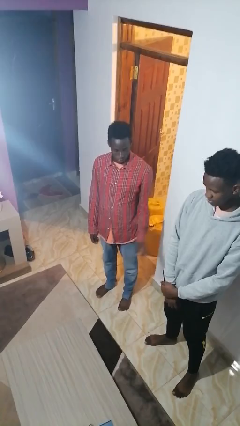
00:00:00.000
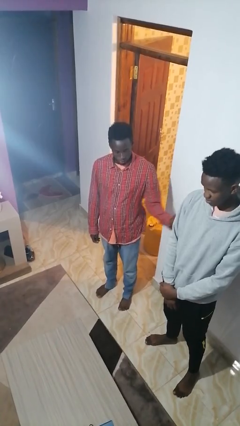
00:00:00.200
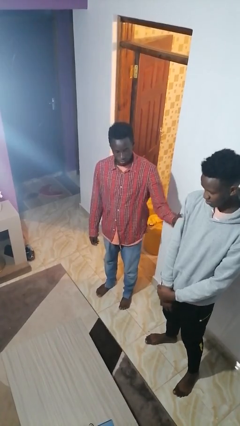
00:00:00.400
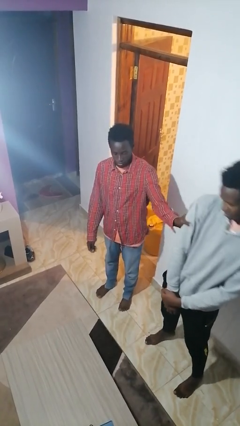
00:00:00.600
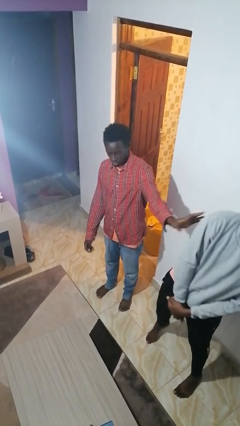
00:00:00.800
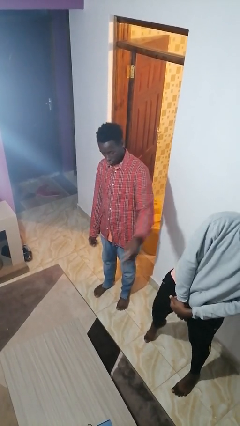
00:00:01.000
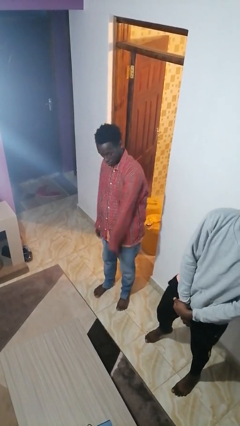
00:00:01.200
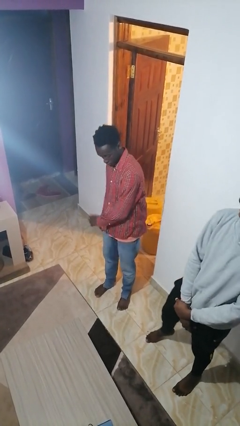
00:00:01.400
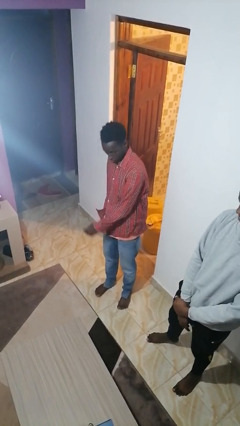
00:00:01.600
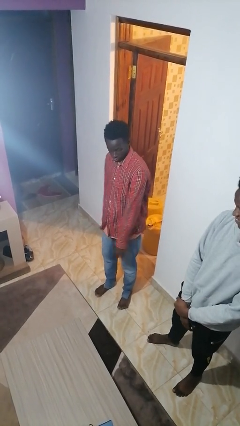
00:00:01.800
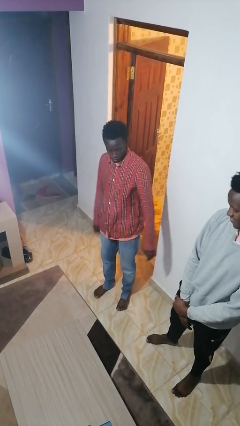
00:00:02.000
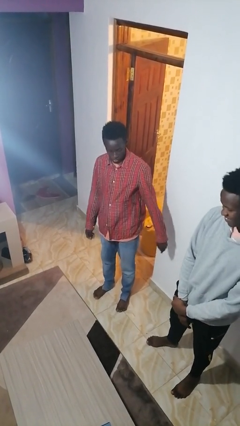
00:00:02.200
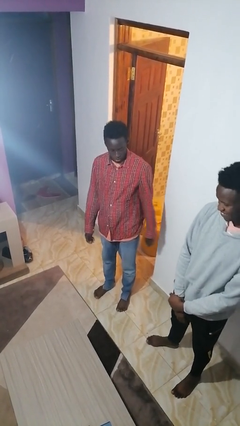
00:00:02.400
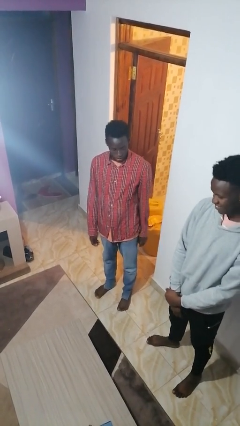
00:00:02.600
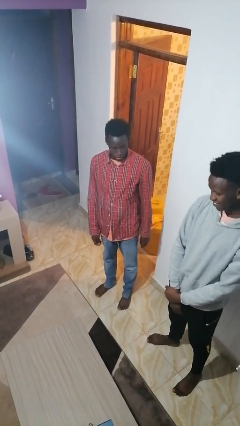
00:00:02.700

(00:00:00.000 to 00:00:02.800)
person shoves person

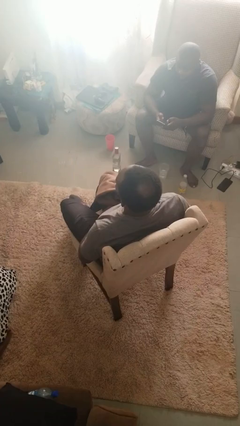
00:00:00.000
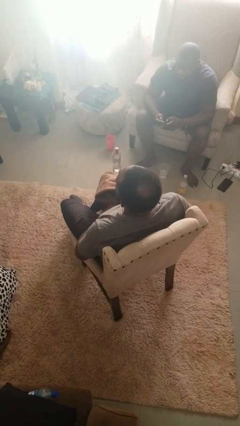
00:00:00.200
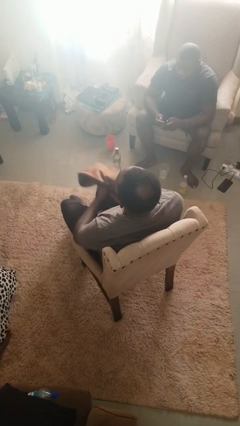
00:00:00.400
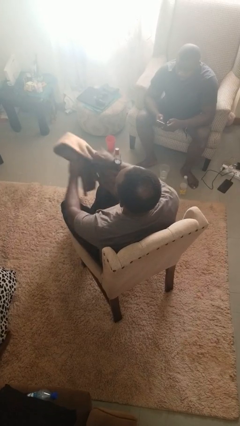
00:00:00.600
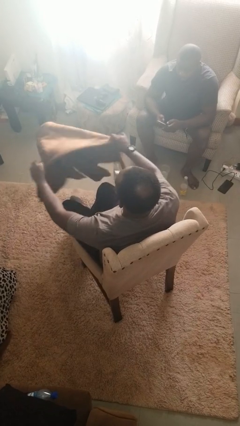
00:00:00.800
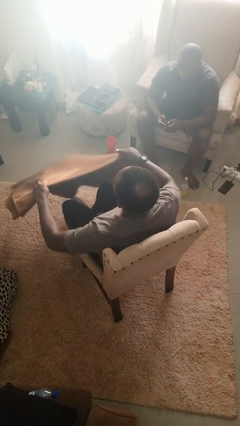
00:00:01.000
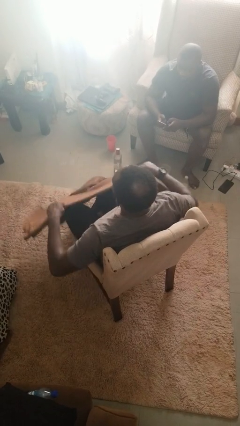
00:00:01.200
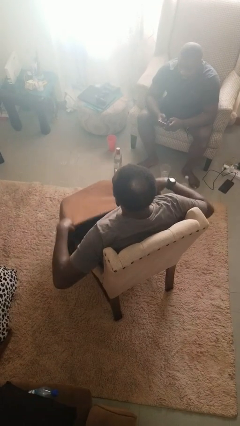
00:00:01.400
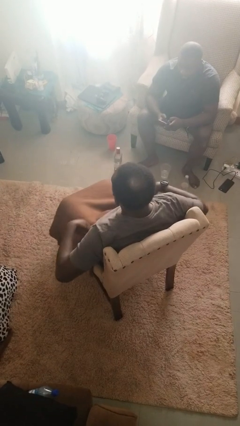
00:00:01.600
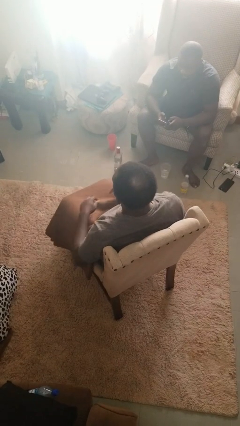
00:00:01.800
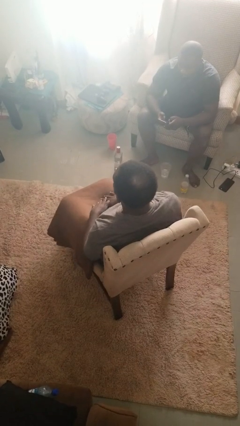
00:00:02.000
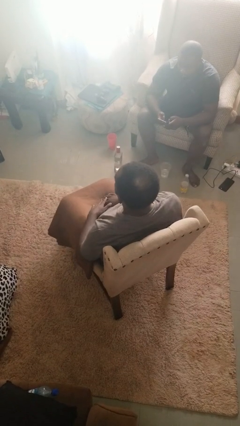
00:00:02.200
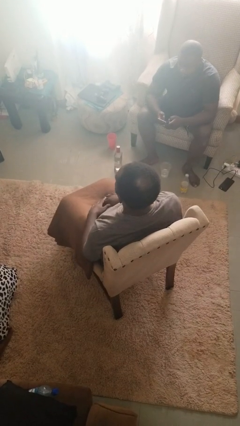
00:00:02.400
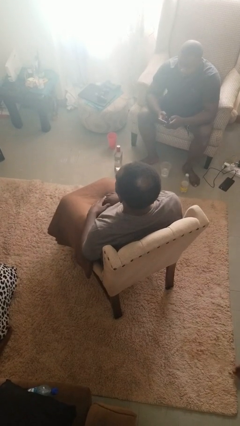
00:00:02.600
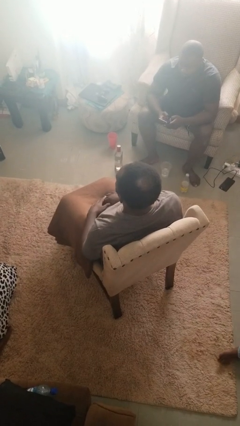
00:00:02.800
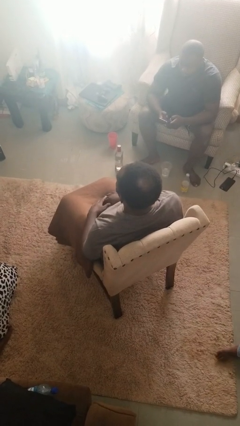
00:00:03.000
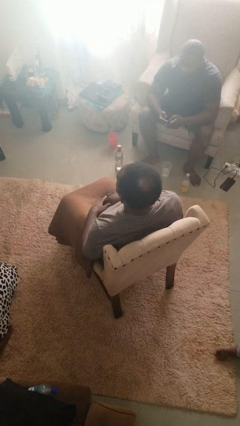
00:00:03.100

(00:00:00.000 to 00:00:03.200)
person covers with blanket

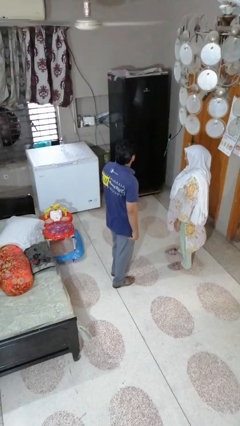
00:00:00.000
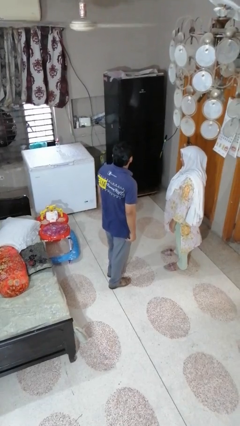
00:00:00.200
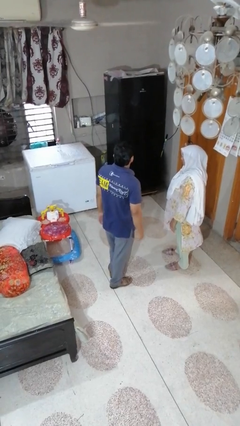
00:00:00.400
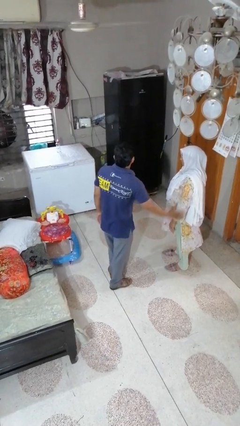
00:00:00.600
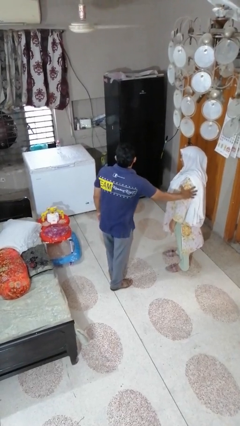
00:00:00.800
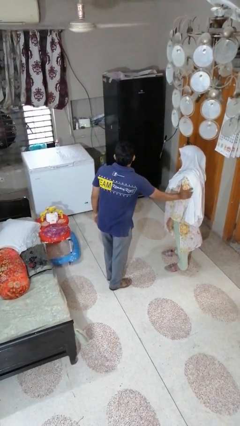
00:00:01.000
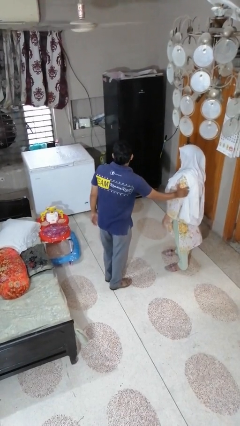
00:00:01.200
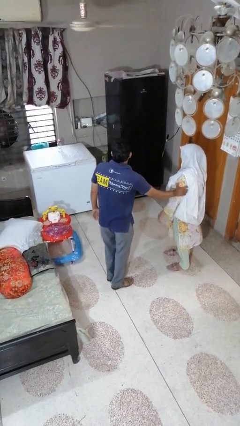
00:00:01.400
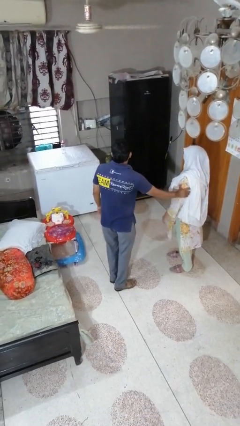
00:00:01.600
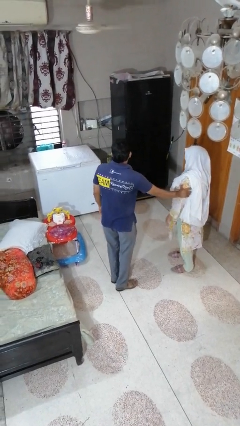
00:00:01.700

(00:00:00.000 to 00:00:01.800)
person grabs person by bicep

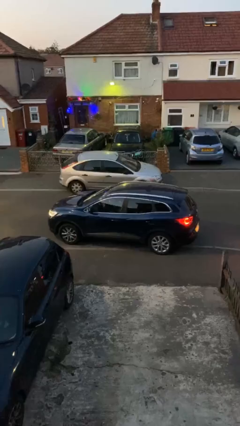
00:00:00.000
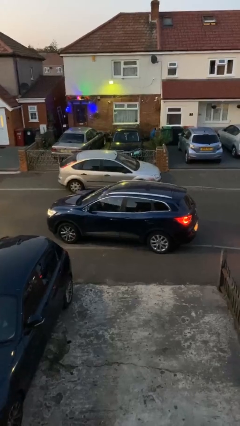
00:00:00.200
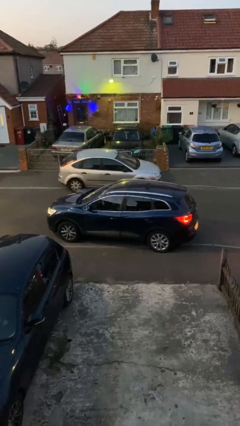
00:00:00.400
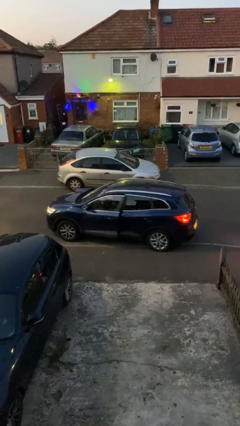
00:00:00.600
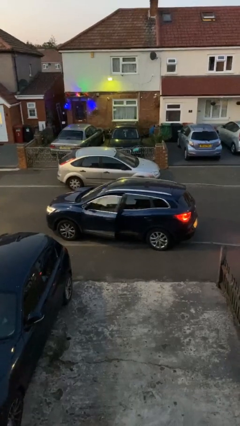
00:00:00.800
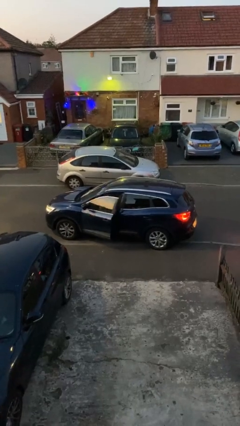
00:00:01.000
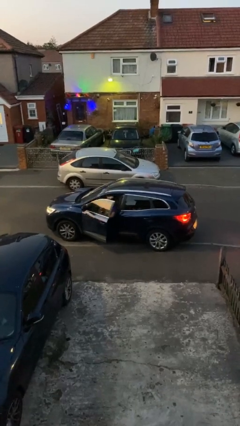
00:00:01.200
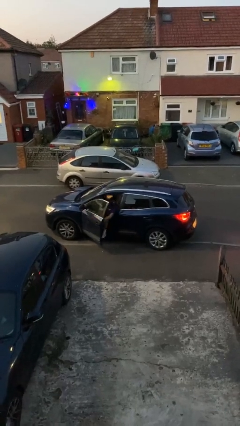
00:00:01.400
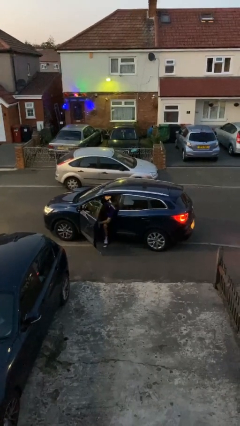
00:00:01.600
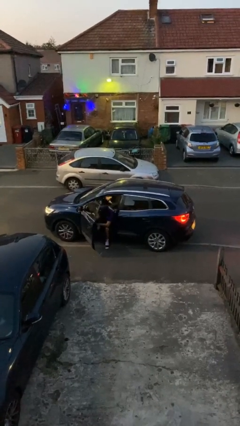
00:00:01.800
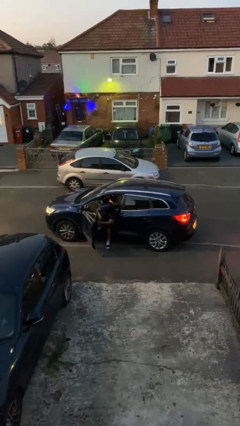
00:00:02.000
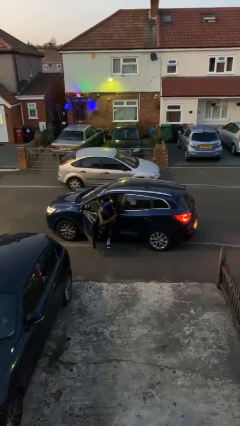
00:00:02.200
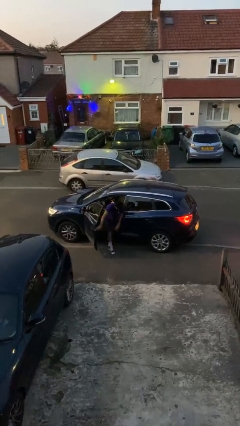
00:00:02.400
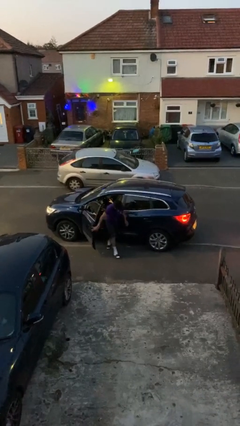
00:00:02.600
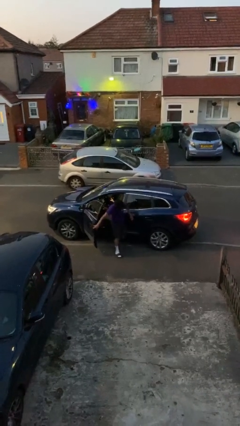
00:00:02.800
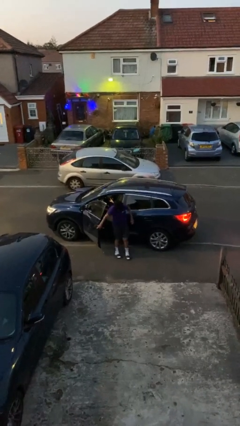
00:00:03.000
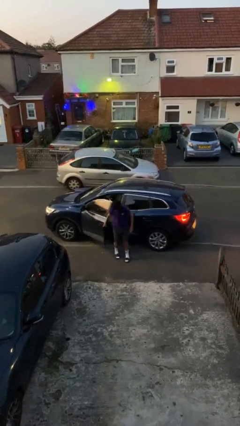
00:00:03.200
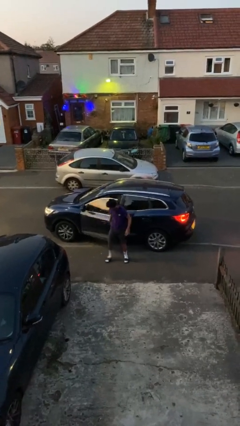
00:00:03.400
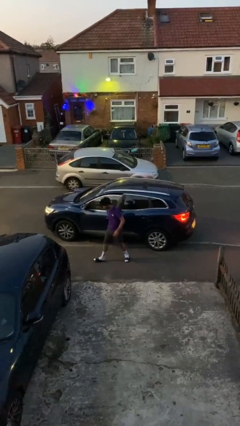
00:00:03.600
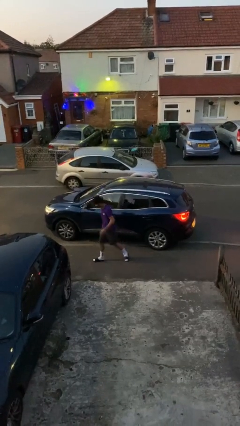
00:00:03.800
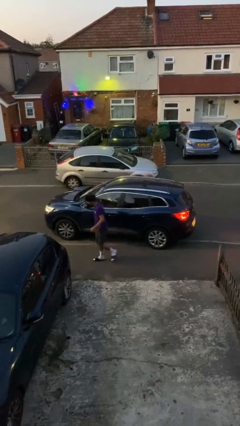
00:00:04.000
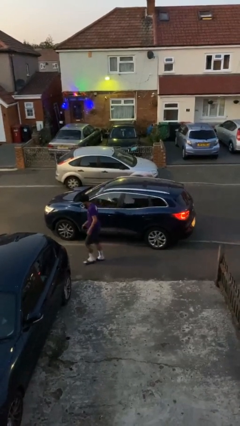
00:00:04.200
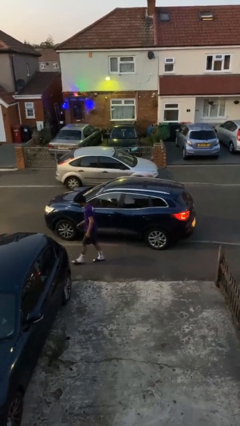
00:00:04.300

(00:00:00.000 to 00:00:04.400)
car drops off person

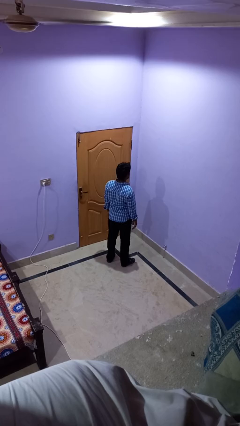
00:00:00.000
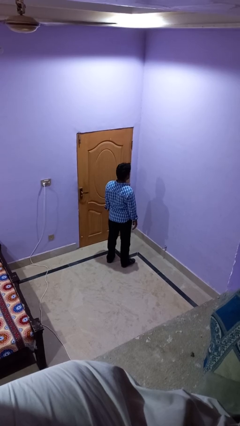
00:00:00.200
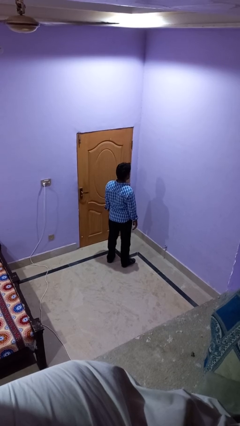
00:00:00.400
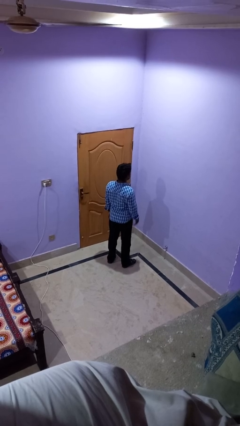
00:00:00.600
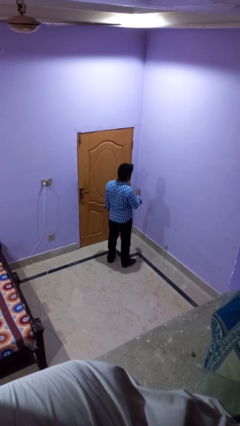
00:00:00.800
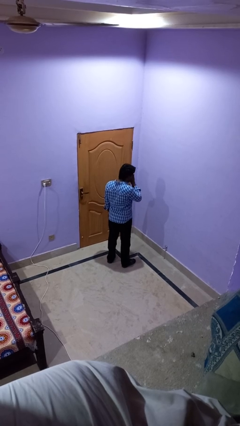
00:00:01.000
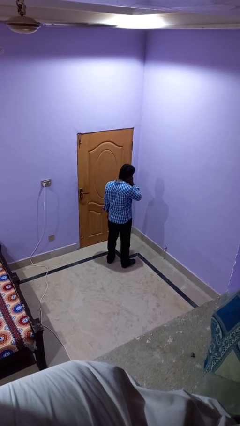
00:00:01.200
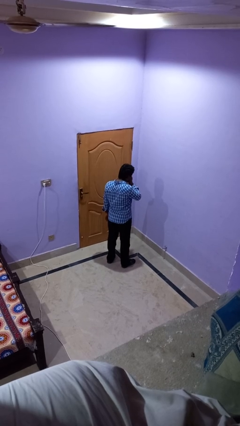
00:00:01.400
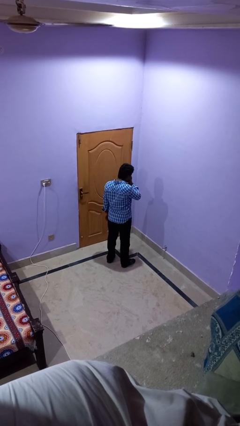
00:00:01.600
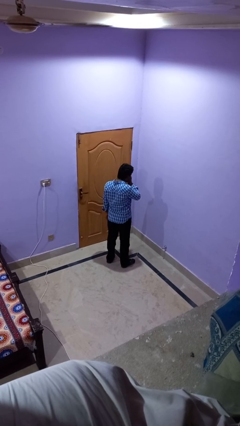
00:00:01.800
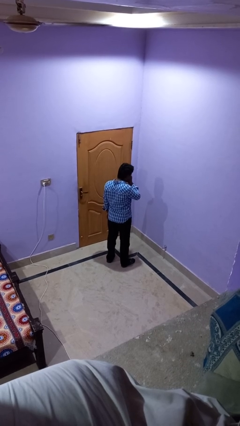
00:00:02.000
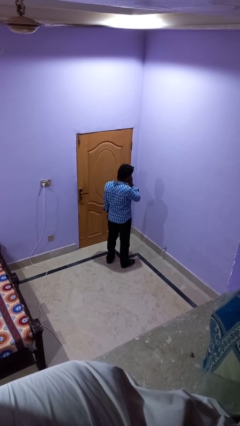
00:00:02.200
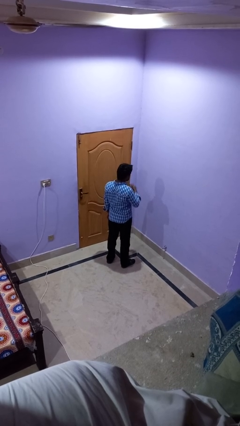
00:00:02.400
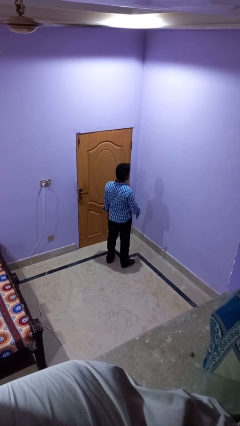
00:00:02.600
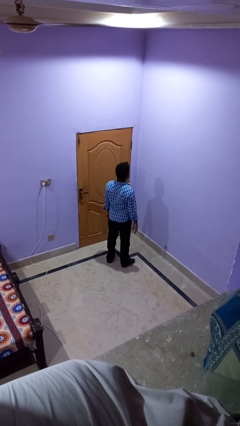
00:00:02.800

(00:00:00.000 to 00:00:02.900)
person sneezes into hand

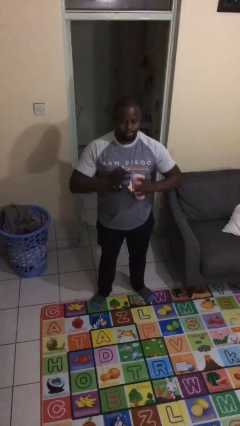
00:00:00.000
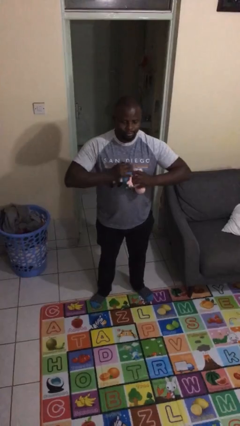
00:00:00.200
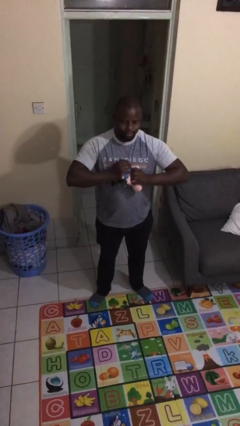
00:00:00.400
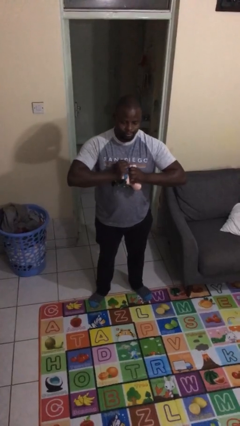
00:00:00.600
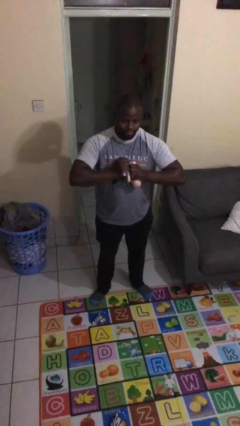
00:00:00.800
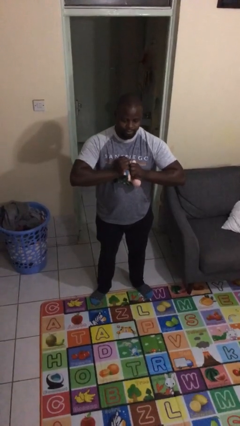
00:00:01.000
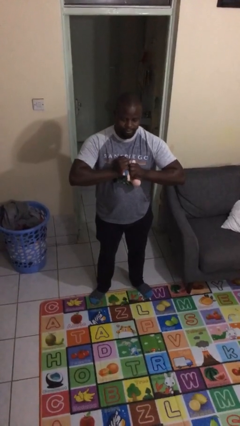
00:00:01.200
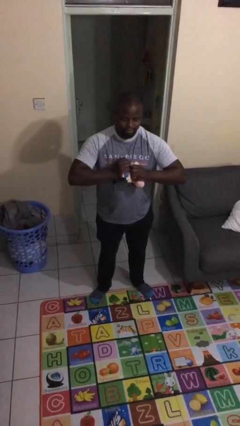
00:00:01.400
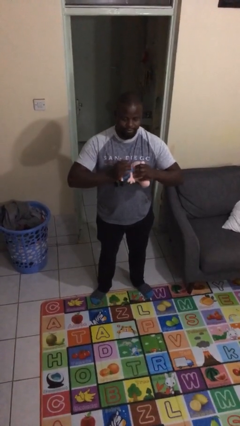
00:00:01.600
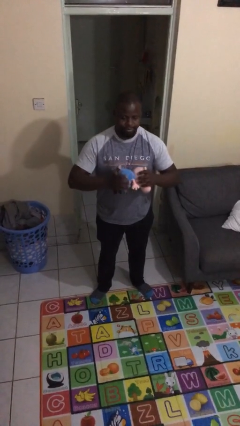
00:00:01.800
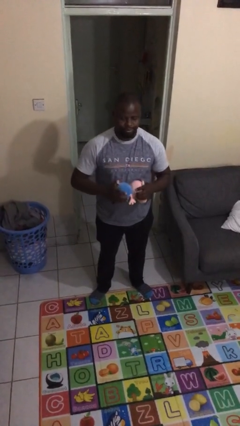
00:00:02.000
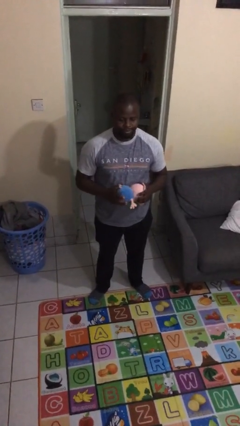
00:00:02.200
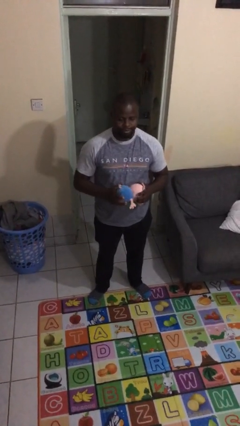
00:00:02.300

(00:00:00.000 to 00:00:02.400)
person squeezes object
